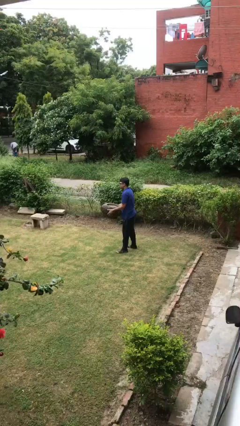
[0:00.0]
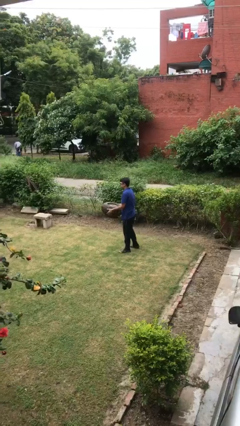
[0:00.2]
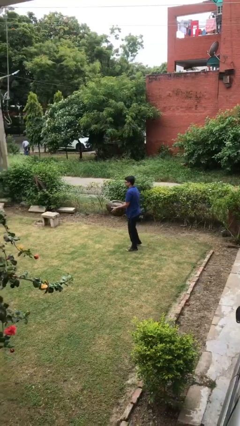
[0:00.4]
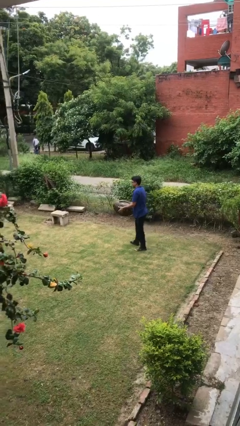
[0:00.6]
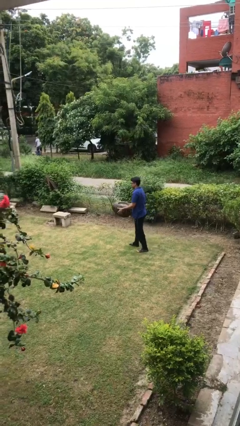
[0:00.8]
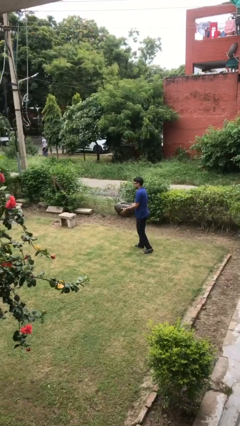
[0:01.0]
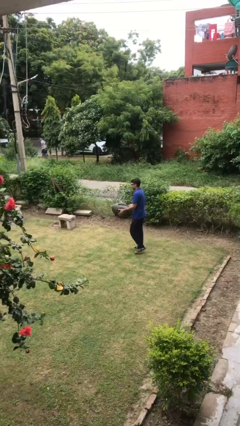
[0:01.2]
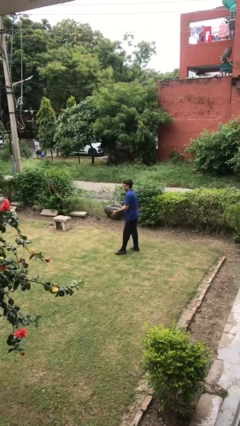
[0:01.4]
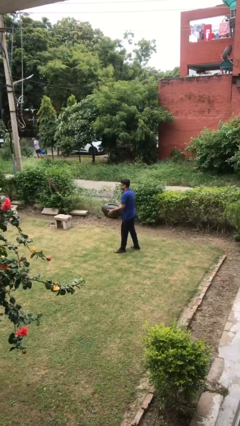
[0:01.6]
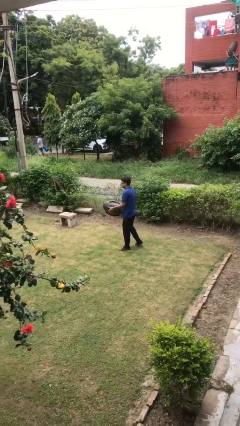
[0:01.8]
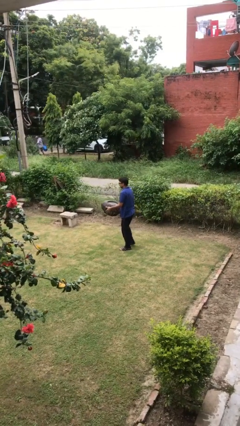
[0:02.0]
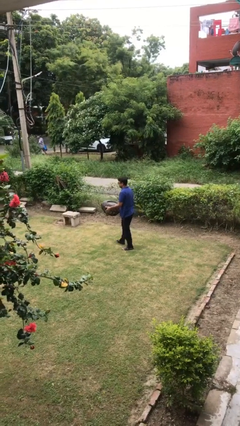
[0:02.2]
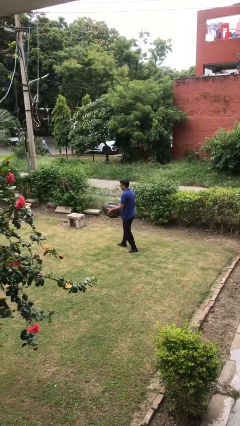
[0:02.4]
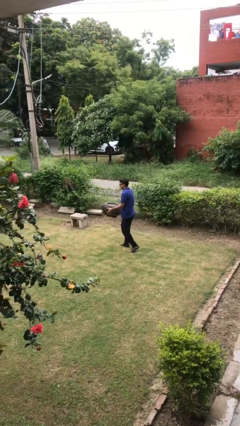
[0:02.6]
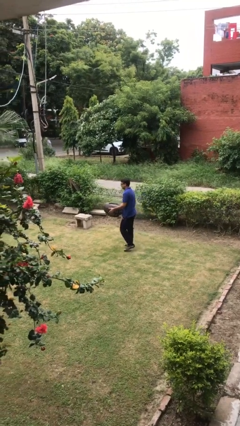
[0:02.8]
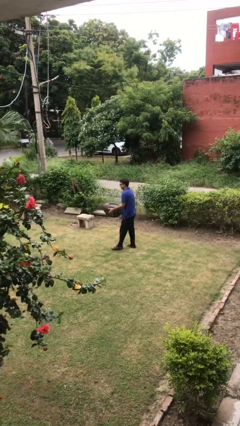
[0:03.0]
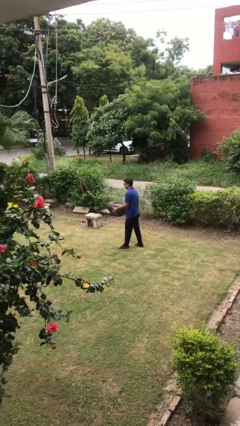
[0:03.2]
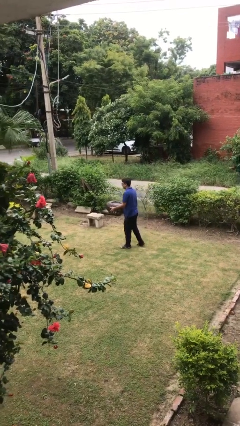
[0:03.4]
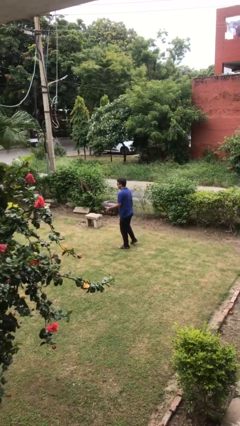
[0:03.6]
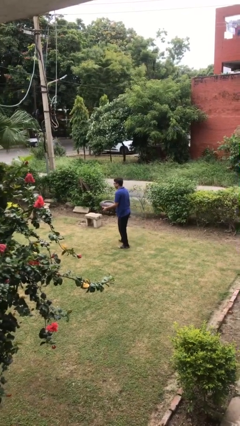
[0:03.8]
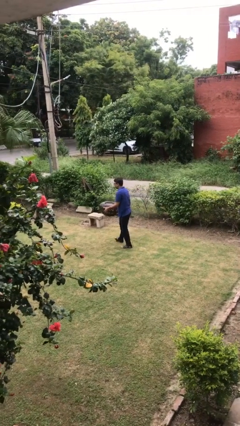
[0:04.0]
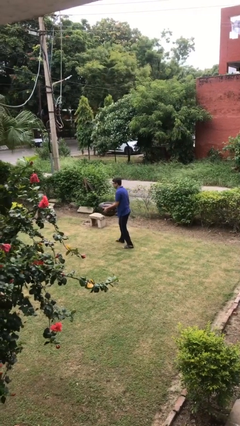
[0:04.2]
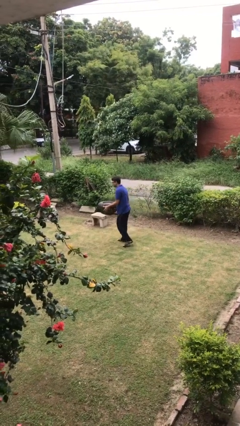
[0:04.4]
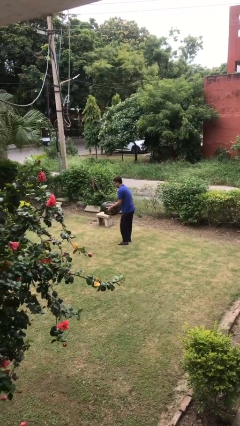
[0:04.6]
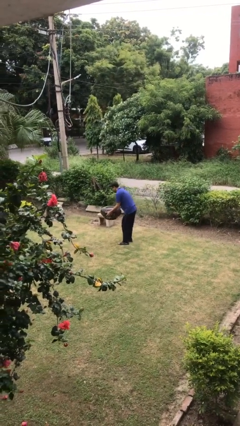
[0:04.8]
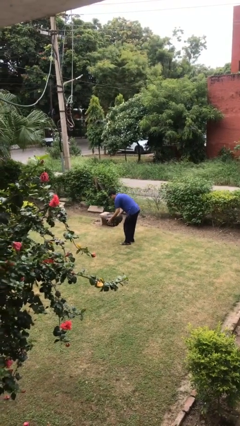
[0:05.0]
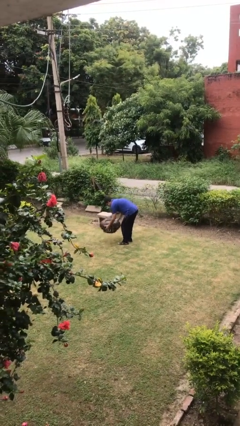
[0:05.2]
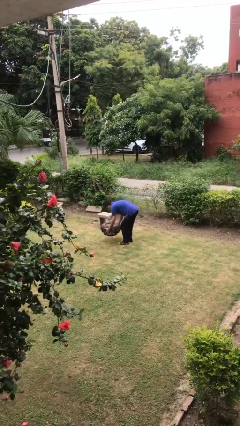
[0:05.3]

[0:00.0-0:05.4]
person carries heavy object

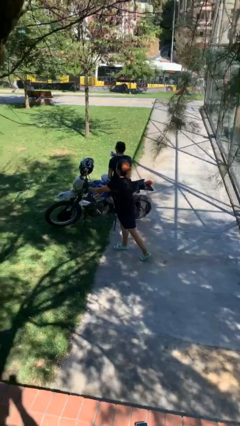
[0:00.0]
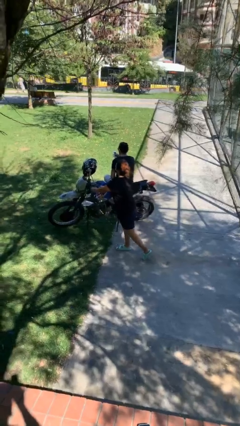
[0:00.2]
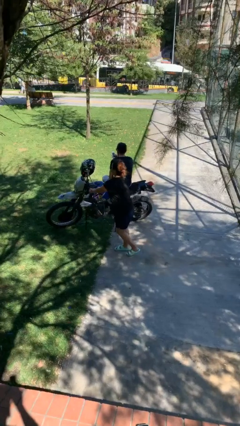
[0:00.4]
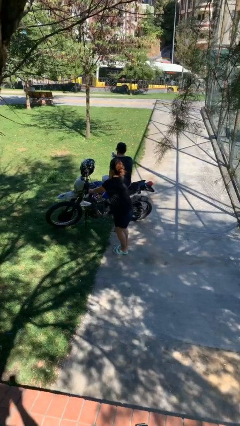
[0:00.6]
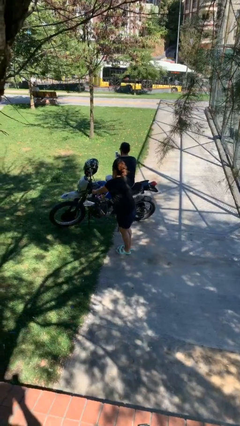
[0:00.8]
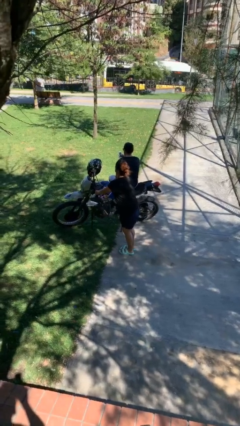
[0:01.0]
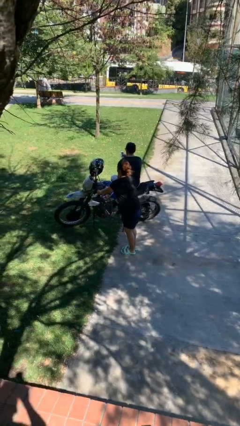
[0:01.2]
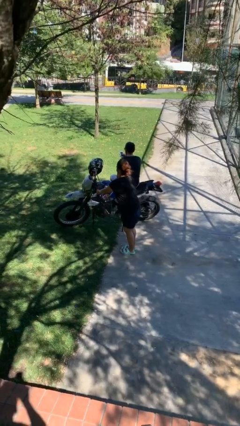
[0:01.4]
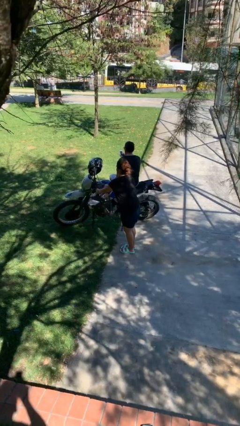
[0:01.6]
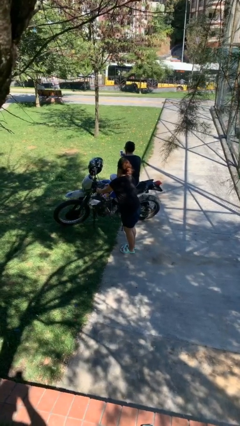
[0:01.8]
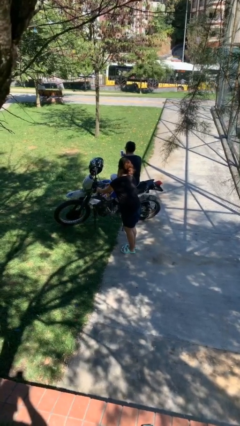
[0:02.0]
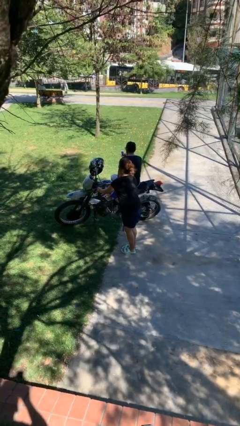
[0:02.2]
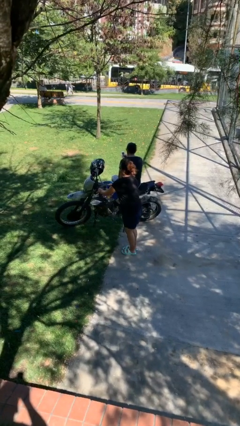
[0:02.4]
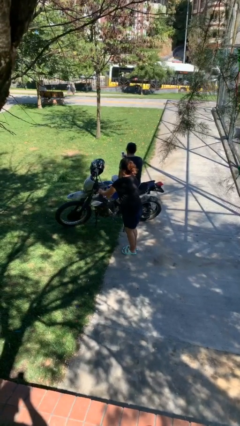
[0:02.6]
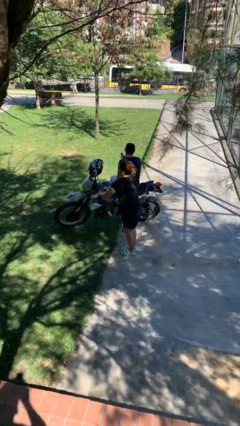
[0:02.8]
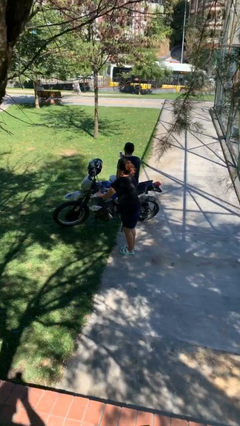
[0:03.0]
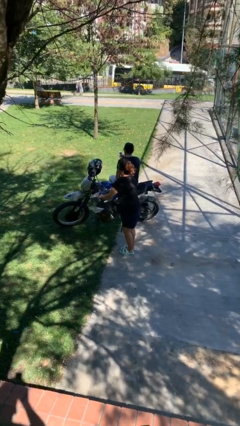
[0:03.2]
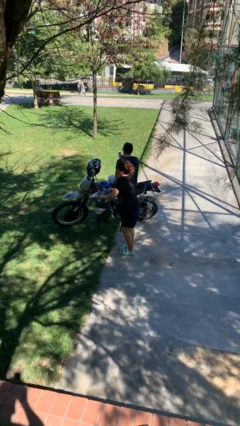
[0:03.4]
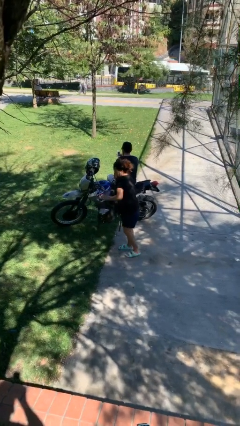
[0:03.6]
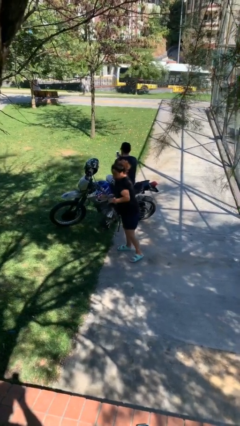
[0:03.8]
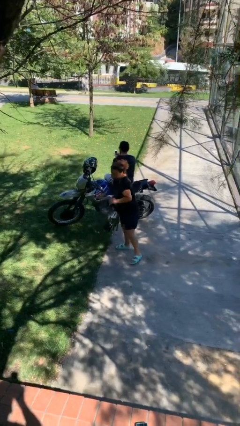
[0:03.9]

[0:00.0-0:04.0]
person steals object from person

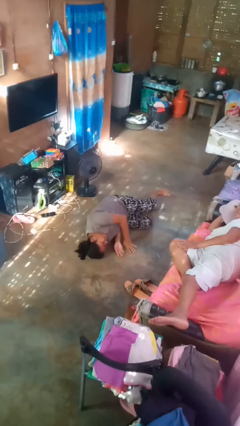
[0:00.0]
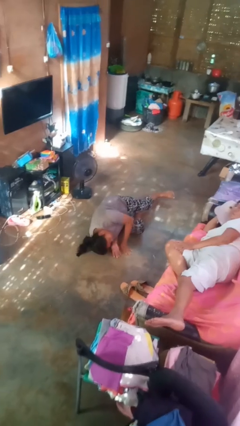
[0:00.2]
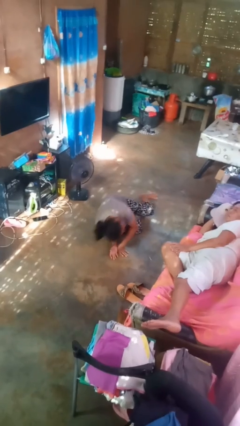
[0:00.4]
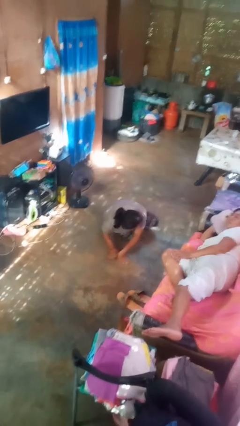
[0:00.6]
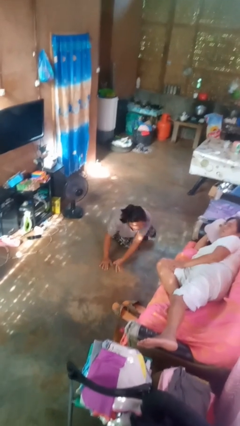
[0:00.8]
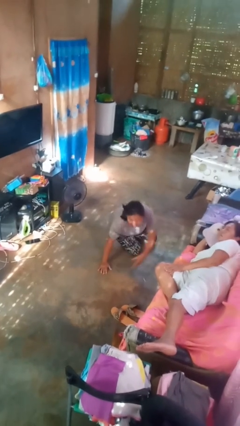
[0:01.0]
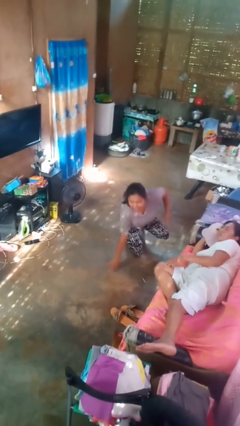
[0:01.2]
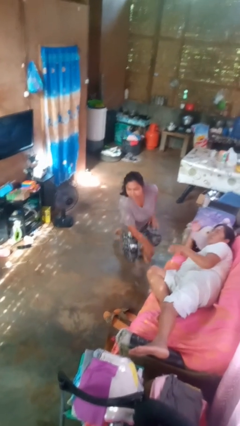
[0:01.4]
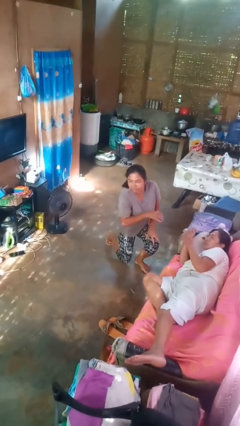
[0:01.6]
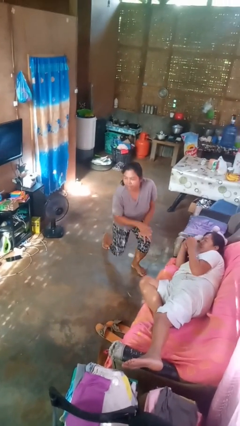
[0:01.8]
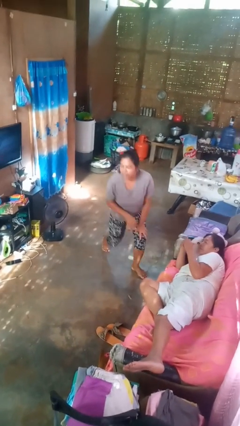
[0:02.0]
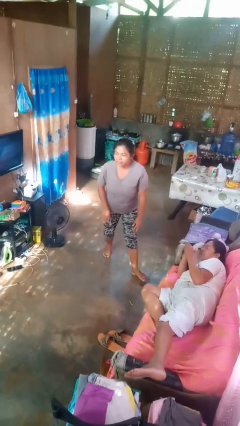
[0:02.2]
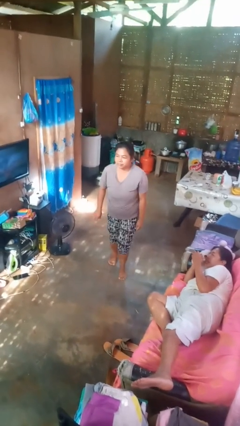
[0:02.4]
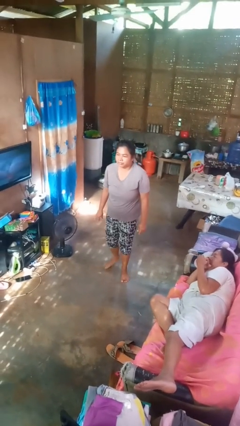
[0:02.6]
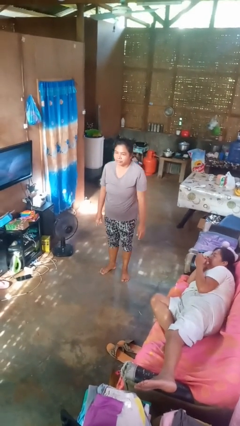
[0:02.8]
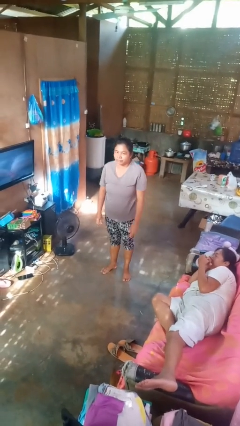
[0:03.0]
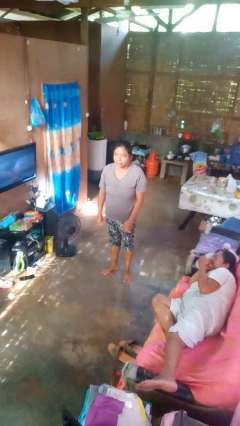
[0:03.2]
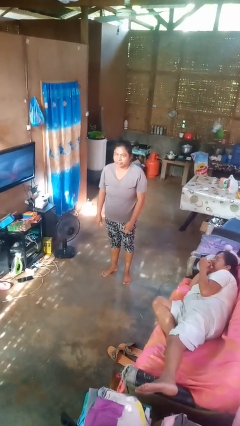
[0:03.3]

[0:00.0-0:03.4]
person stands up from floor

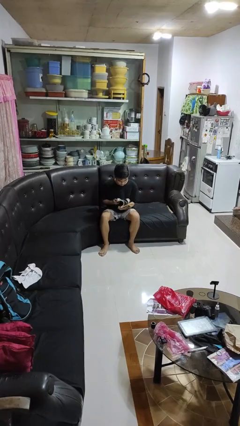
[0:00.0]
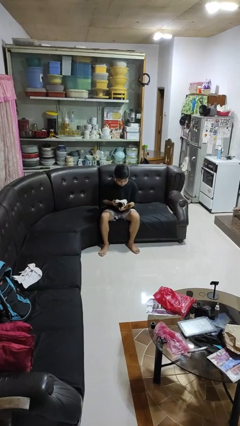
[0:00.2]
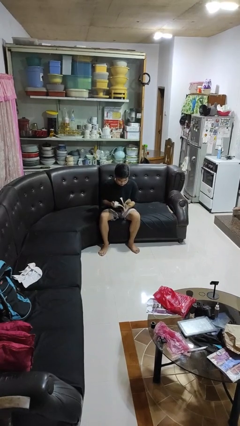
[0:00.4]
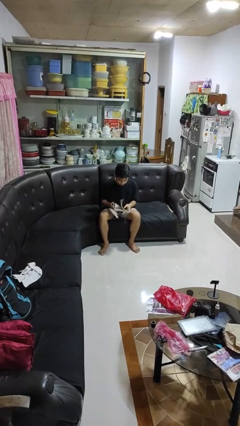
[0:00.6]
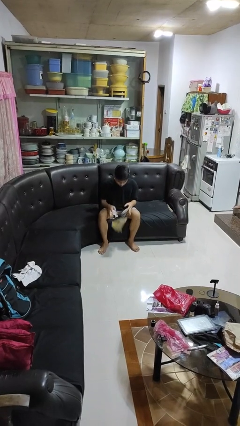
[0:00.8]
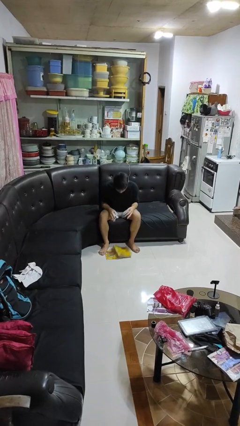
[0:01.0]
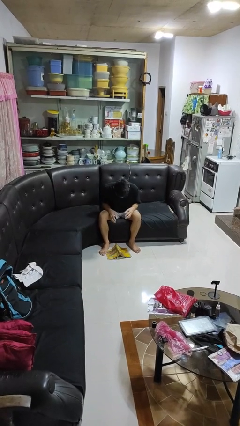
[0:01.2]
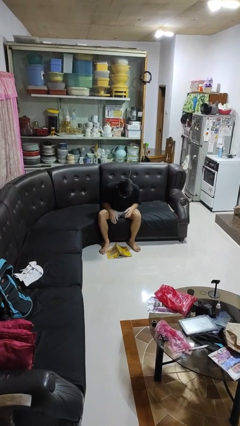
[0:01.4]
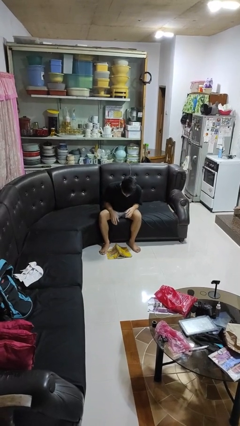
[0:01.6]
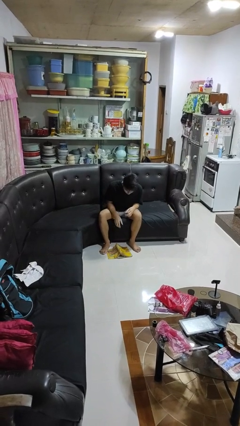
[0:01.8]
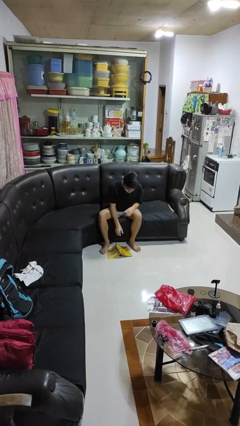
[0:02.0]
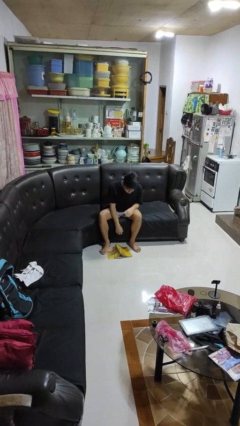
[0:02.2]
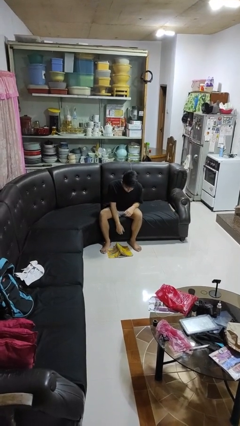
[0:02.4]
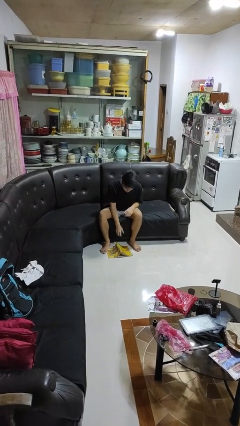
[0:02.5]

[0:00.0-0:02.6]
person drops object

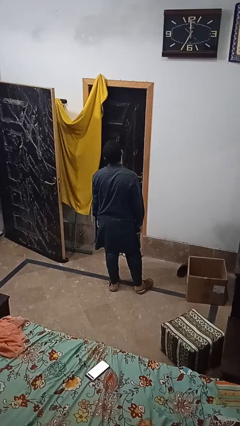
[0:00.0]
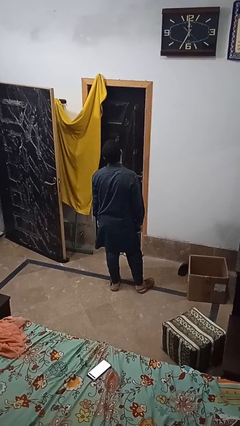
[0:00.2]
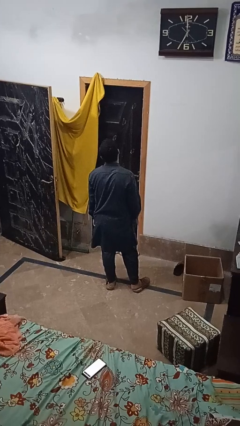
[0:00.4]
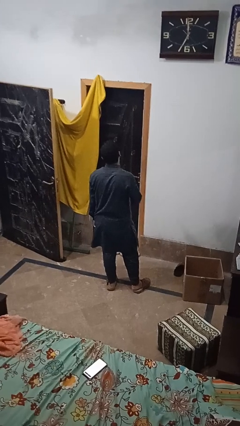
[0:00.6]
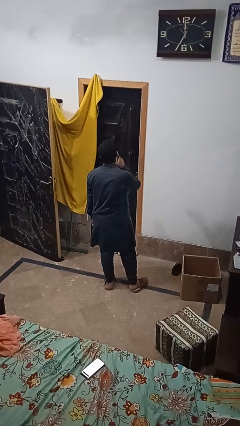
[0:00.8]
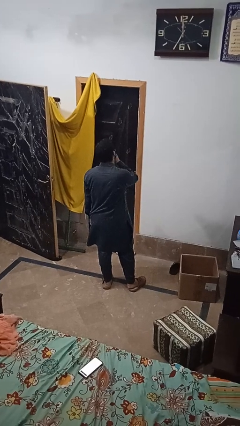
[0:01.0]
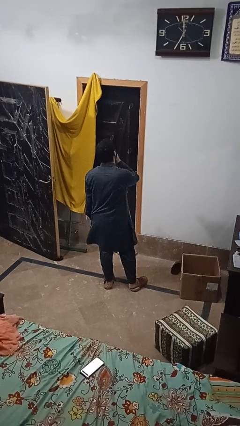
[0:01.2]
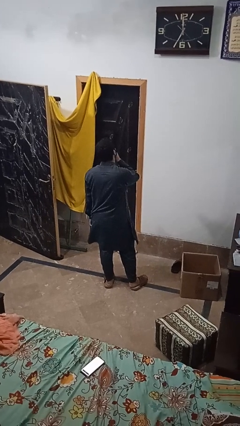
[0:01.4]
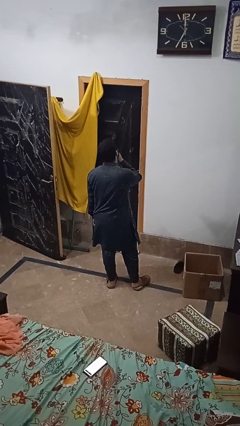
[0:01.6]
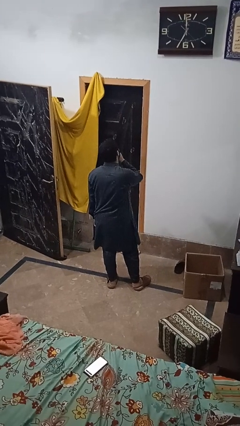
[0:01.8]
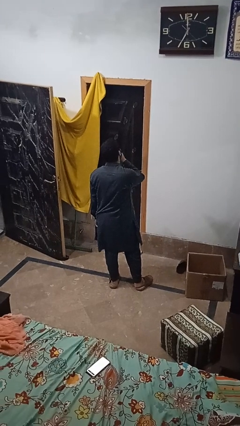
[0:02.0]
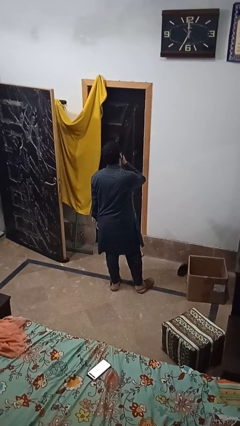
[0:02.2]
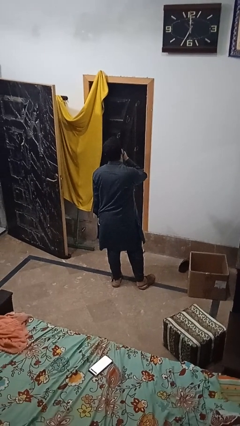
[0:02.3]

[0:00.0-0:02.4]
person gestures be quiet
